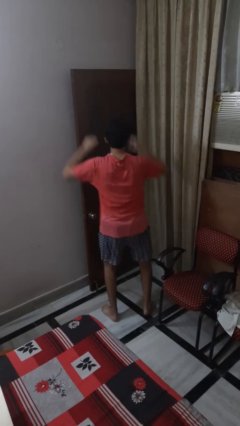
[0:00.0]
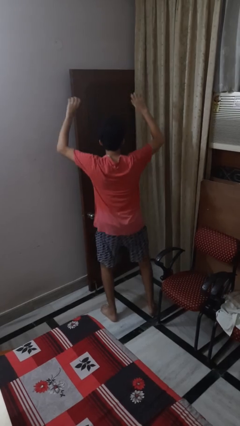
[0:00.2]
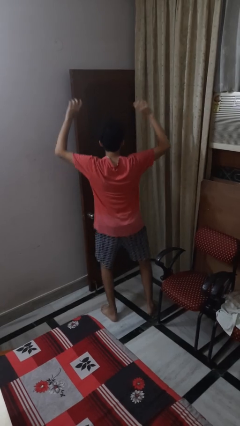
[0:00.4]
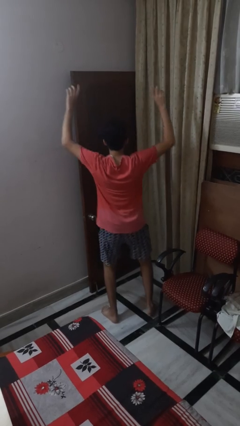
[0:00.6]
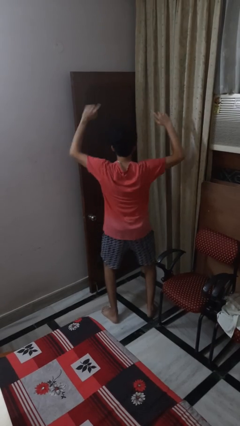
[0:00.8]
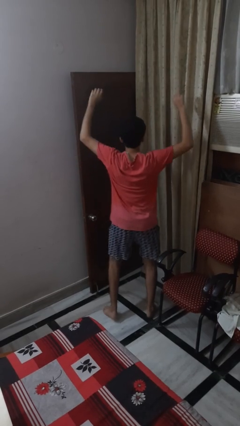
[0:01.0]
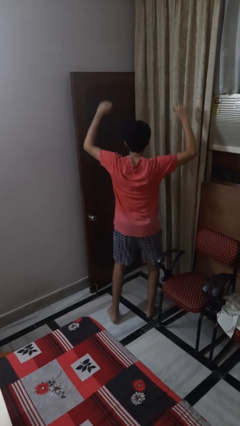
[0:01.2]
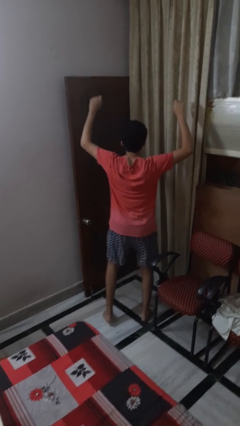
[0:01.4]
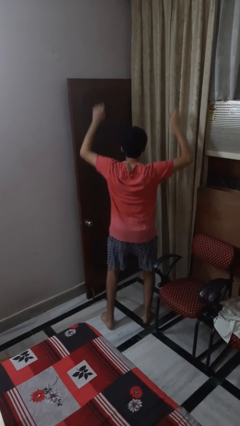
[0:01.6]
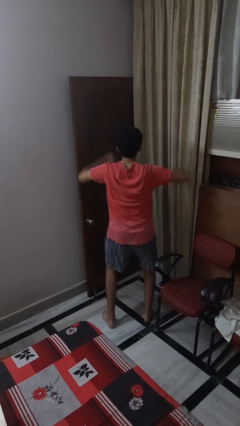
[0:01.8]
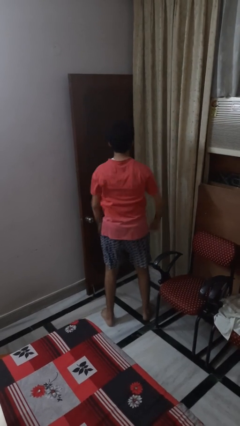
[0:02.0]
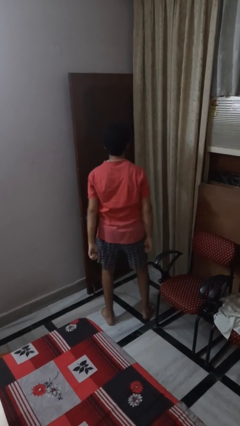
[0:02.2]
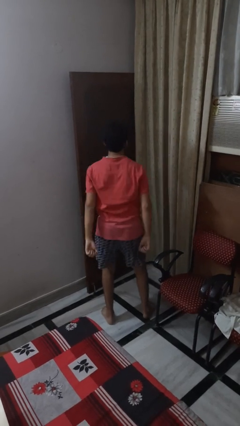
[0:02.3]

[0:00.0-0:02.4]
person dances in place

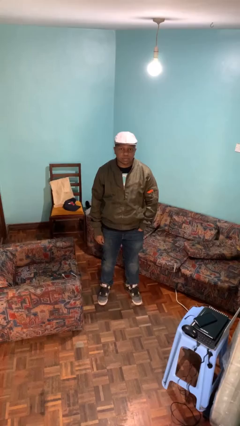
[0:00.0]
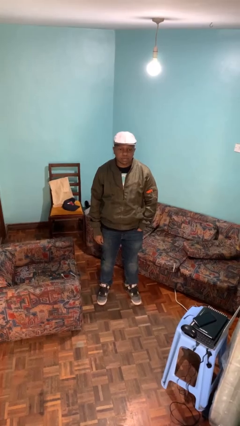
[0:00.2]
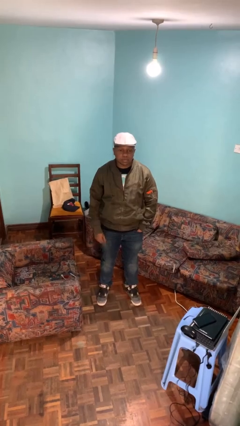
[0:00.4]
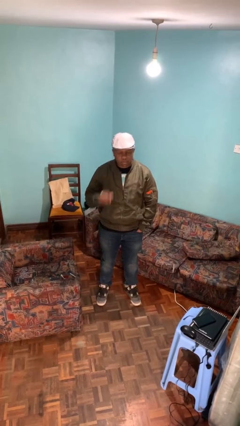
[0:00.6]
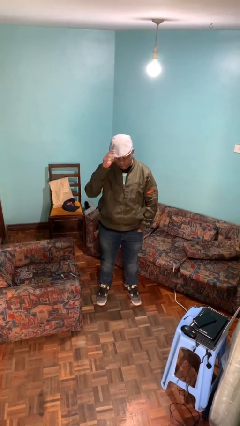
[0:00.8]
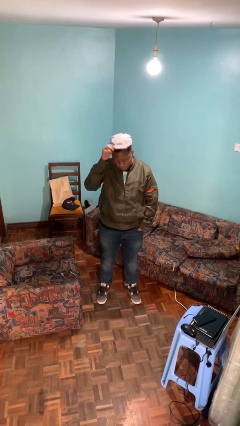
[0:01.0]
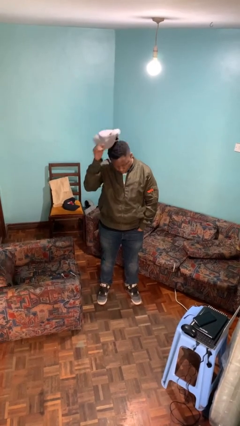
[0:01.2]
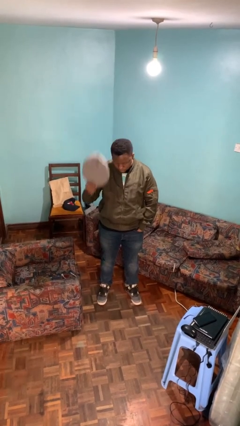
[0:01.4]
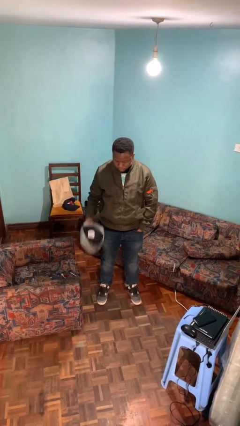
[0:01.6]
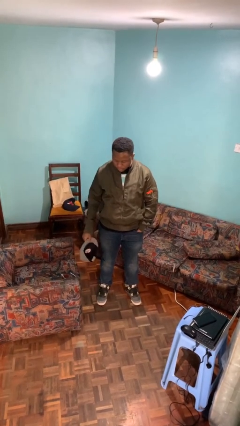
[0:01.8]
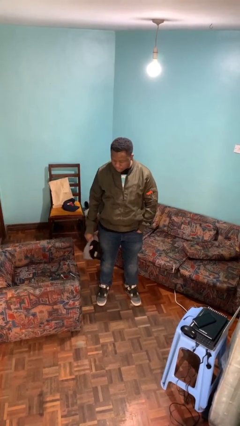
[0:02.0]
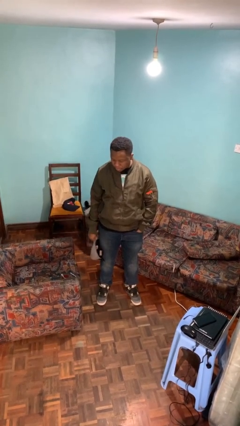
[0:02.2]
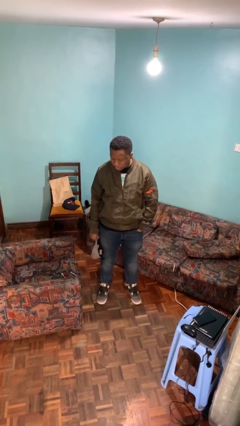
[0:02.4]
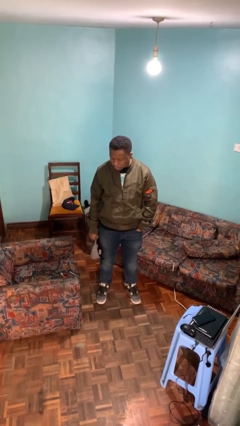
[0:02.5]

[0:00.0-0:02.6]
person takes off hat

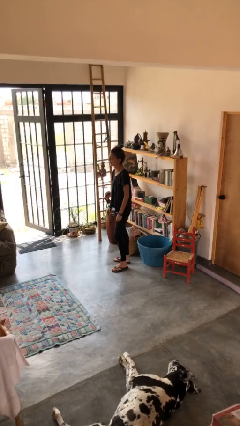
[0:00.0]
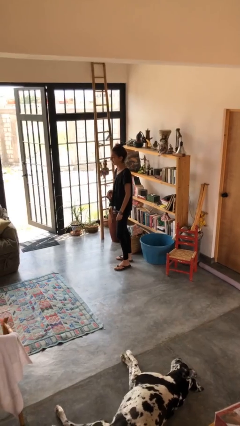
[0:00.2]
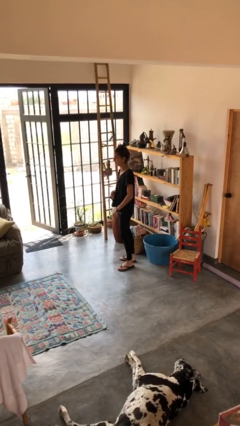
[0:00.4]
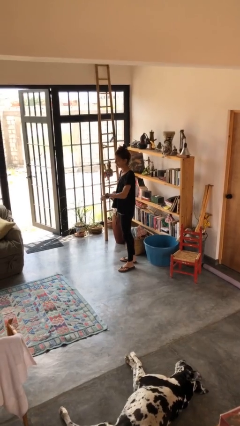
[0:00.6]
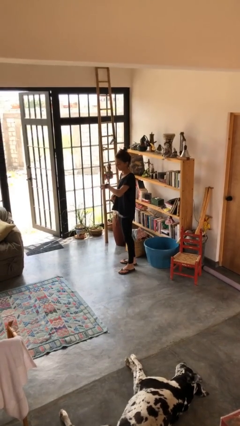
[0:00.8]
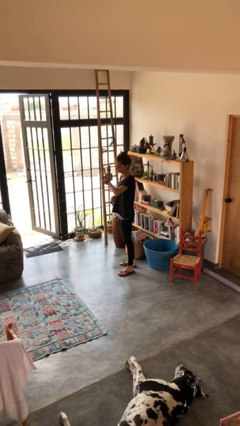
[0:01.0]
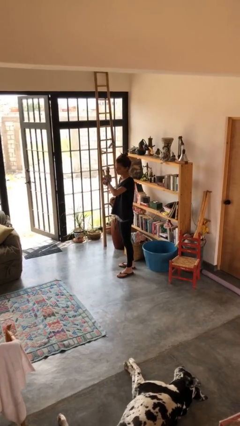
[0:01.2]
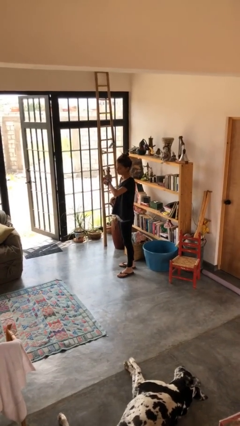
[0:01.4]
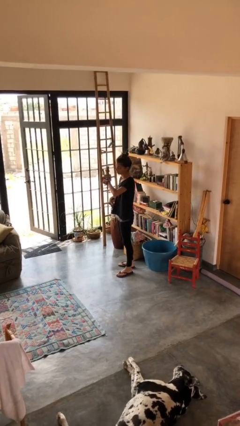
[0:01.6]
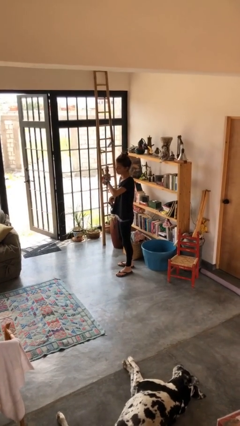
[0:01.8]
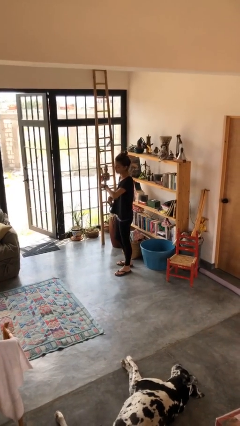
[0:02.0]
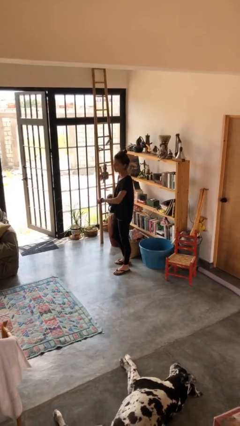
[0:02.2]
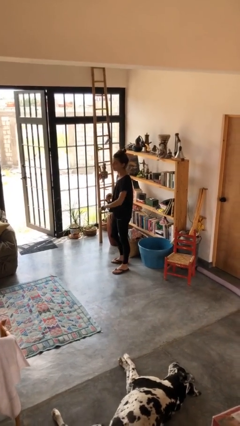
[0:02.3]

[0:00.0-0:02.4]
person looks at wristwatch

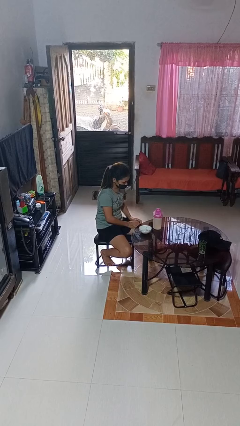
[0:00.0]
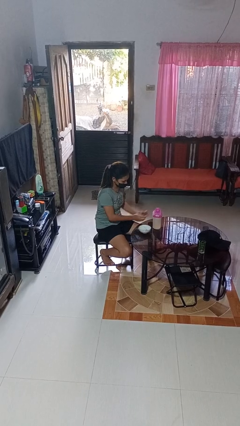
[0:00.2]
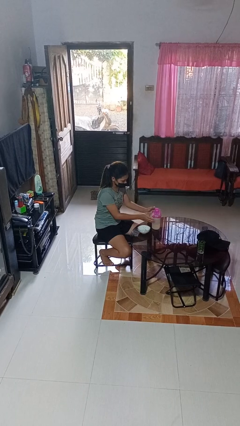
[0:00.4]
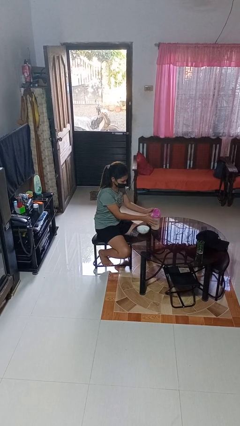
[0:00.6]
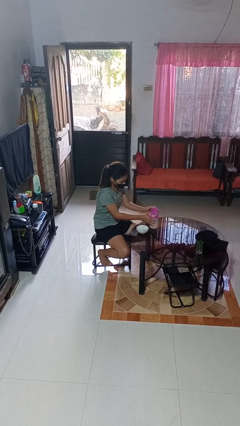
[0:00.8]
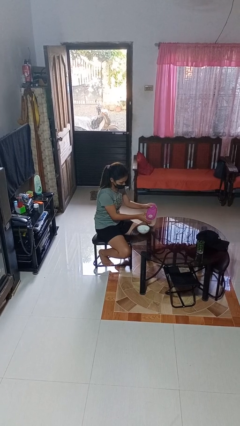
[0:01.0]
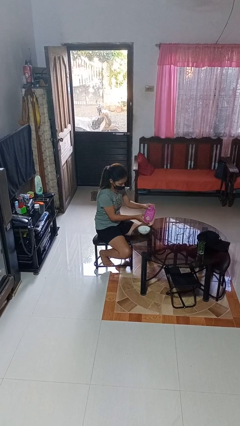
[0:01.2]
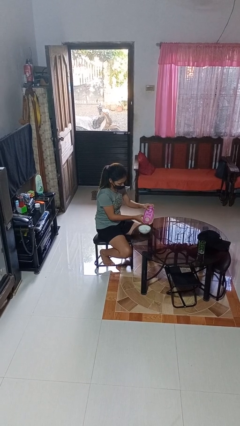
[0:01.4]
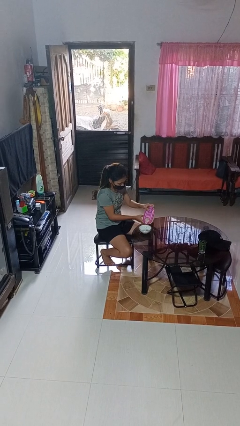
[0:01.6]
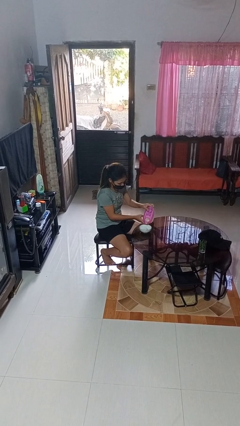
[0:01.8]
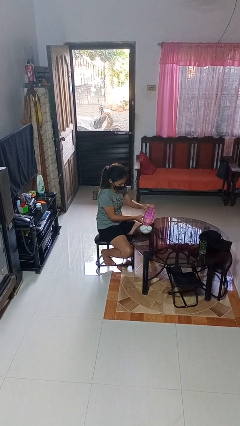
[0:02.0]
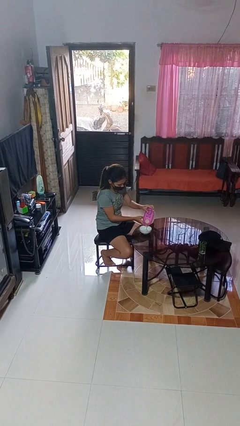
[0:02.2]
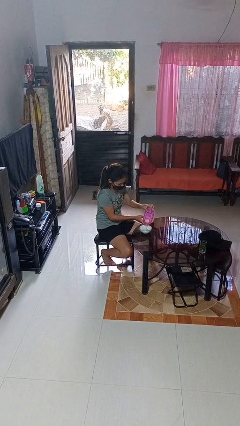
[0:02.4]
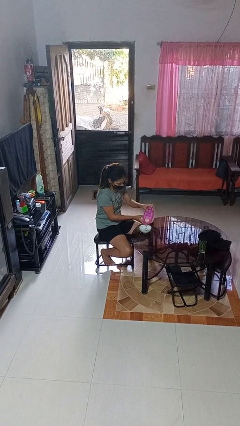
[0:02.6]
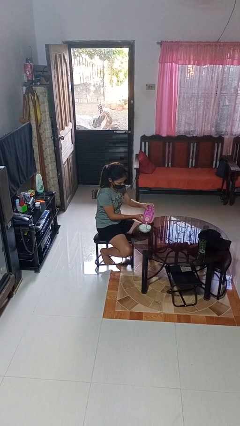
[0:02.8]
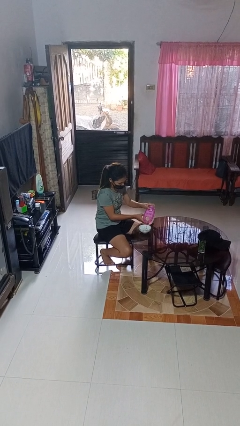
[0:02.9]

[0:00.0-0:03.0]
person pours into bowl

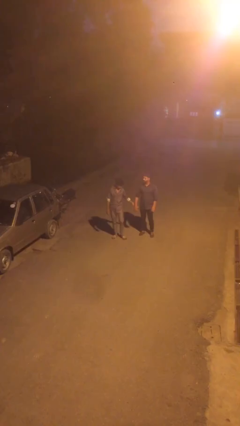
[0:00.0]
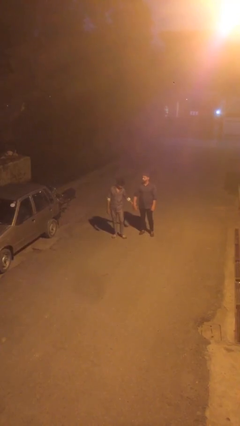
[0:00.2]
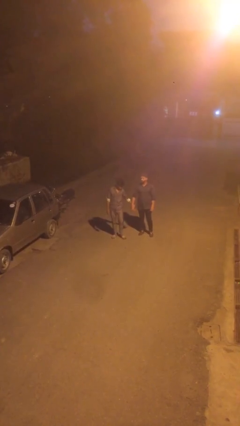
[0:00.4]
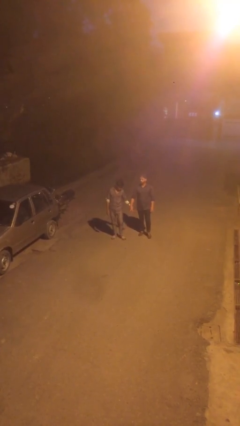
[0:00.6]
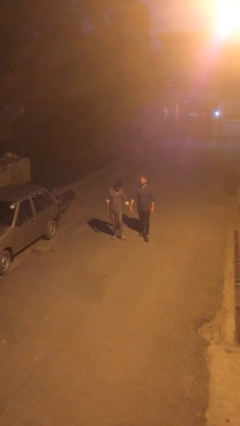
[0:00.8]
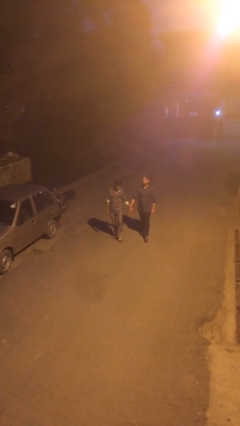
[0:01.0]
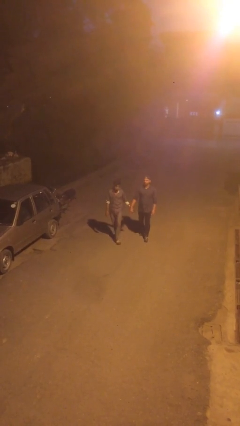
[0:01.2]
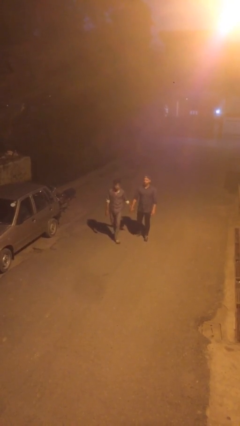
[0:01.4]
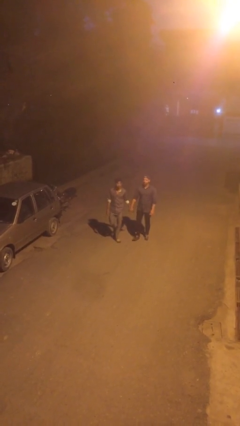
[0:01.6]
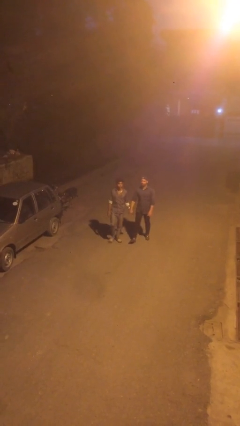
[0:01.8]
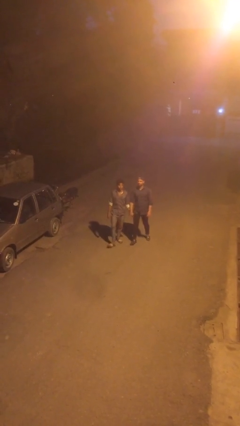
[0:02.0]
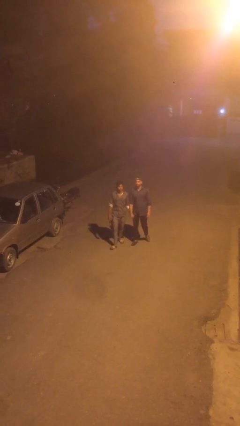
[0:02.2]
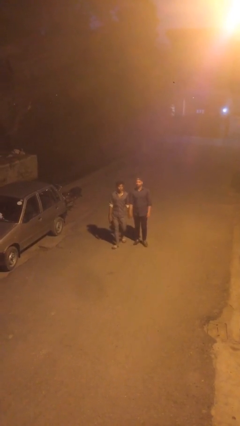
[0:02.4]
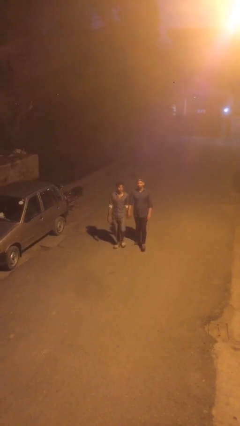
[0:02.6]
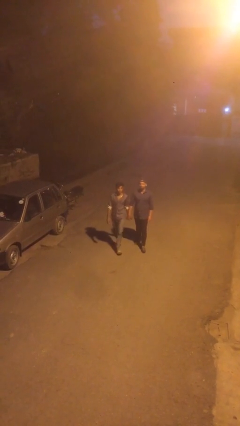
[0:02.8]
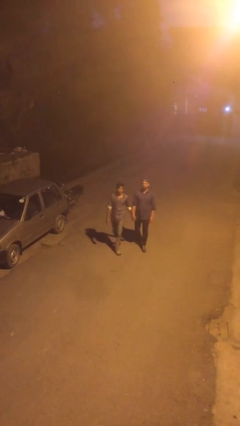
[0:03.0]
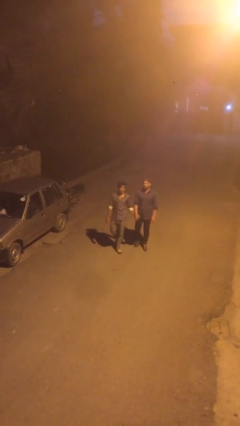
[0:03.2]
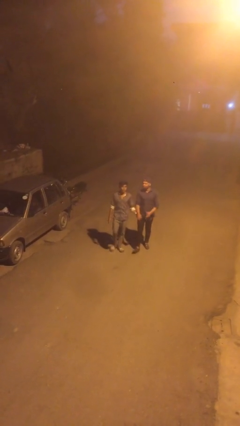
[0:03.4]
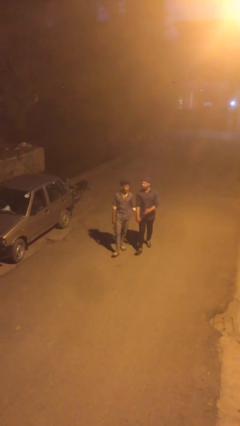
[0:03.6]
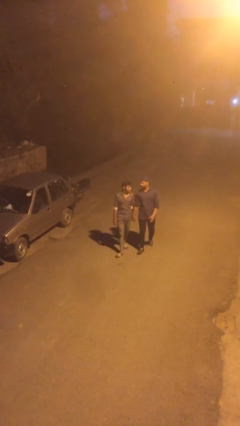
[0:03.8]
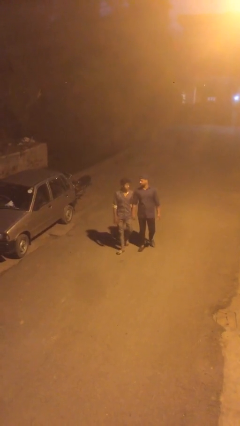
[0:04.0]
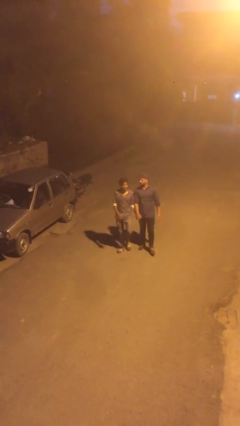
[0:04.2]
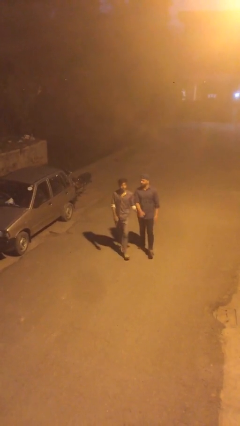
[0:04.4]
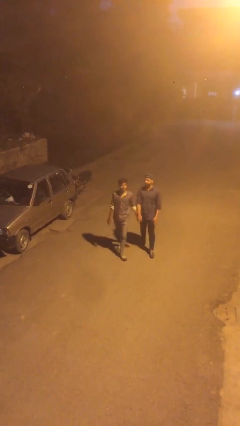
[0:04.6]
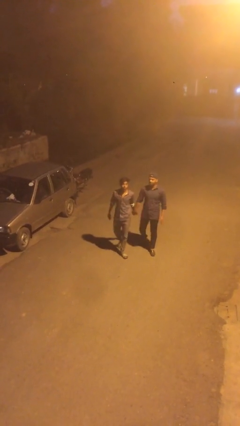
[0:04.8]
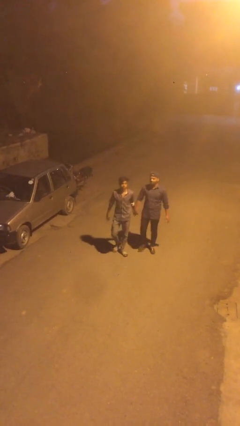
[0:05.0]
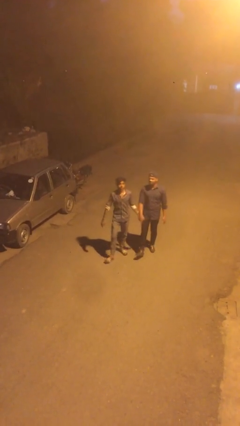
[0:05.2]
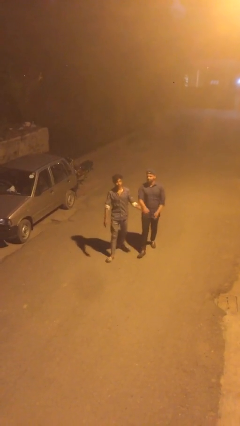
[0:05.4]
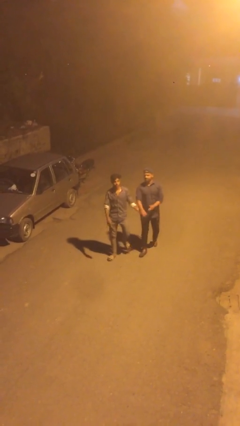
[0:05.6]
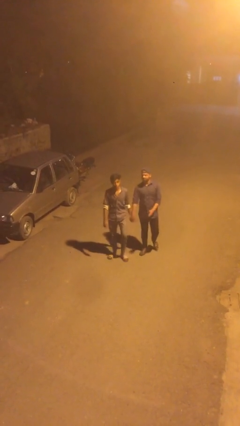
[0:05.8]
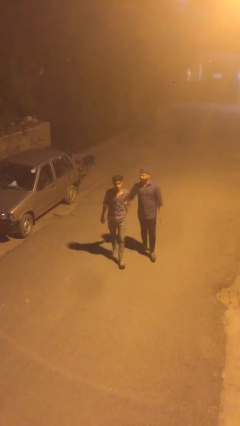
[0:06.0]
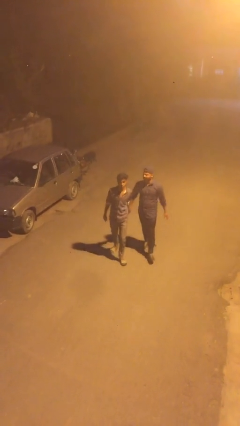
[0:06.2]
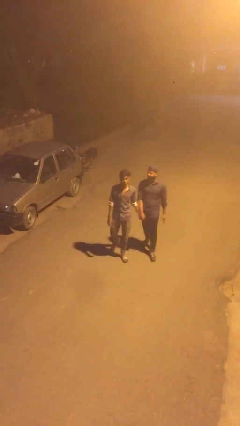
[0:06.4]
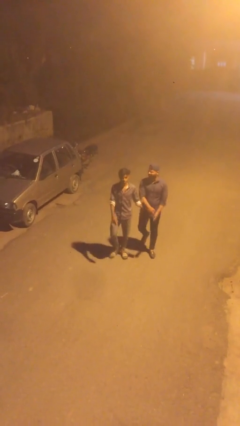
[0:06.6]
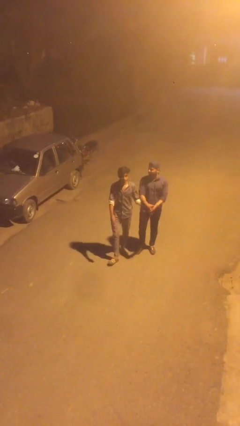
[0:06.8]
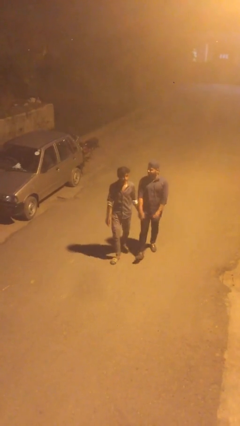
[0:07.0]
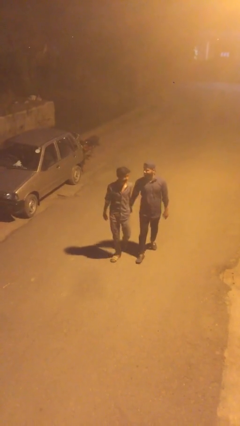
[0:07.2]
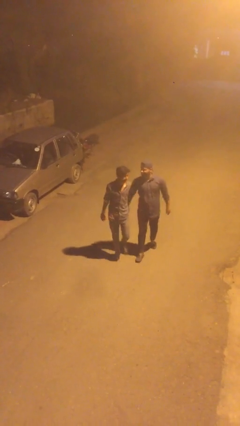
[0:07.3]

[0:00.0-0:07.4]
person holds hand
